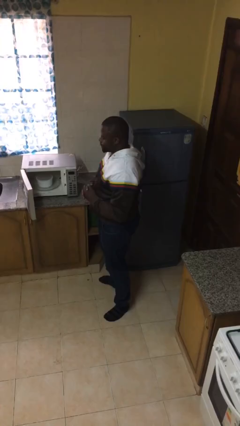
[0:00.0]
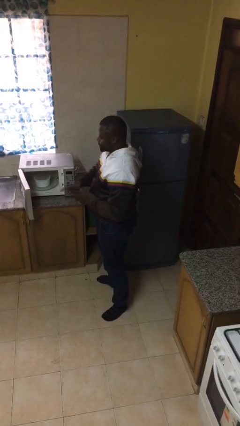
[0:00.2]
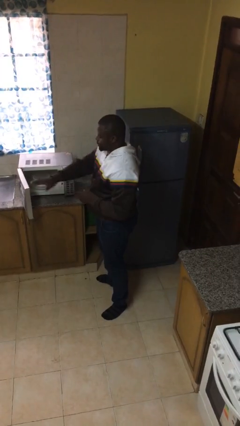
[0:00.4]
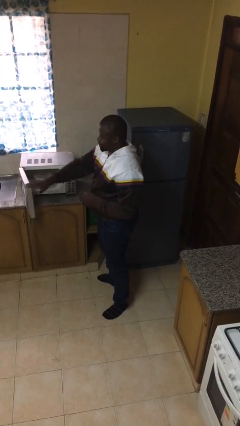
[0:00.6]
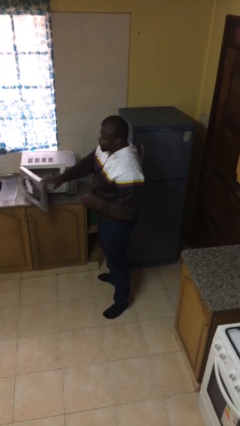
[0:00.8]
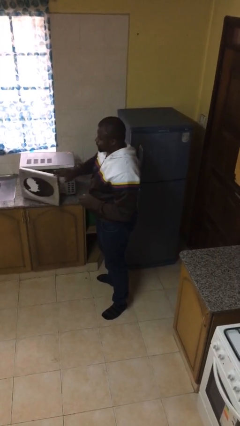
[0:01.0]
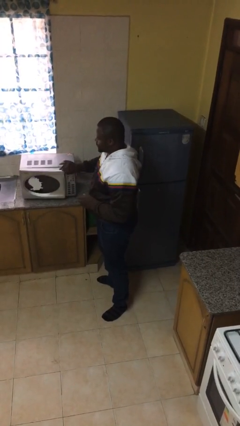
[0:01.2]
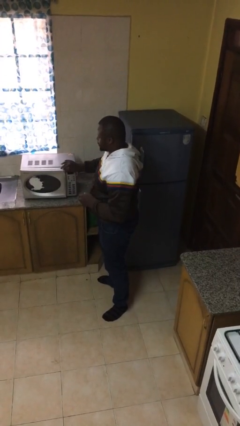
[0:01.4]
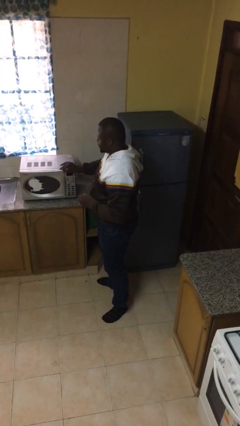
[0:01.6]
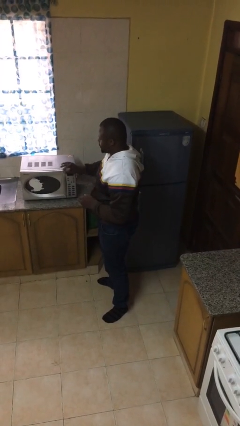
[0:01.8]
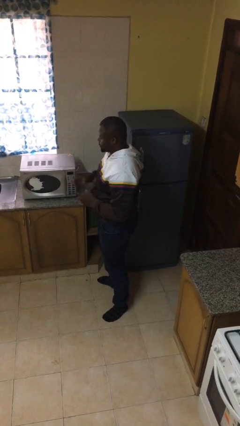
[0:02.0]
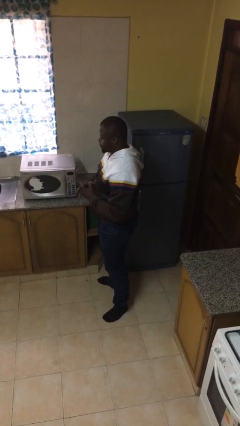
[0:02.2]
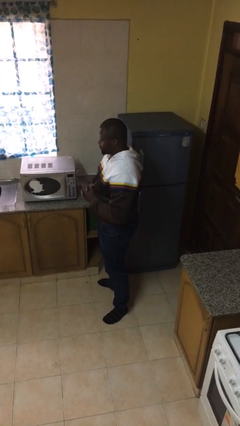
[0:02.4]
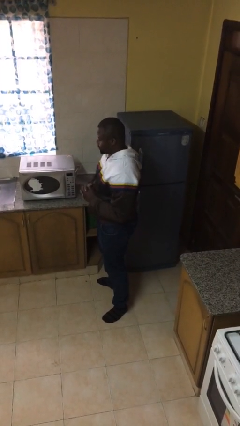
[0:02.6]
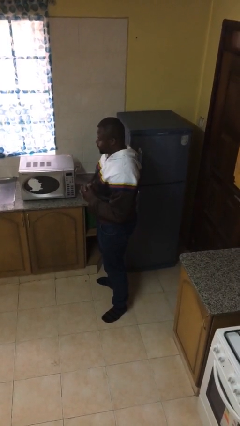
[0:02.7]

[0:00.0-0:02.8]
person closes microwave

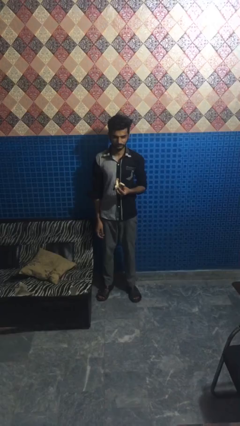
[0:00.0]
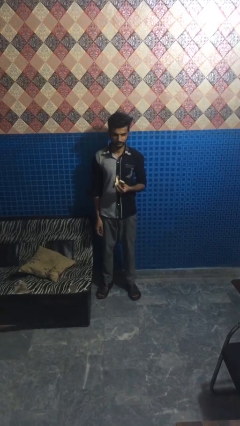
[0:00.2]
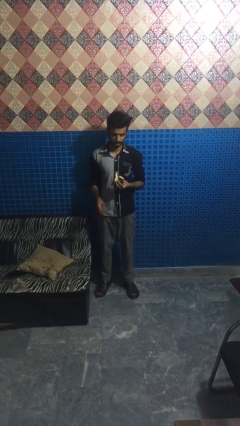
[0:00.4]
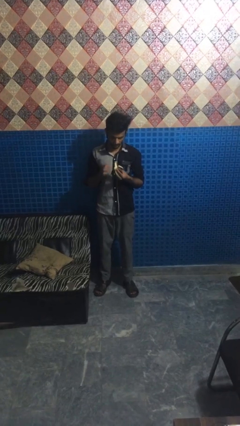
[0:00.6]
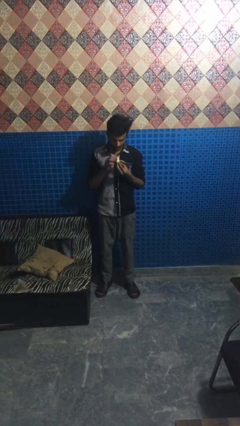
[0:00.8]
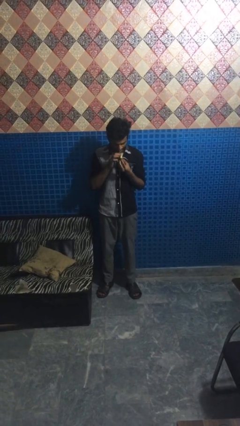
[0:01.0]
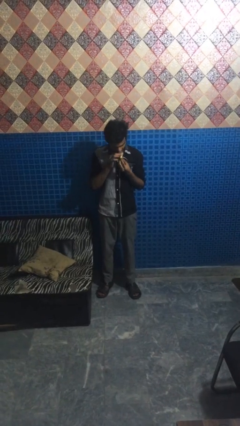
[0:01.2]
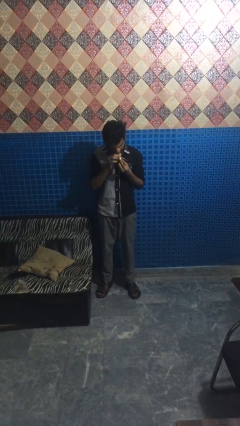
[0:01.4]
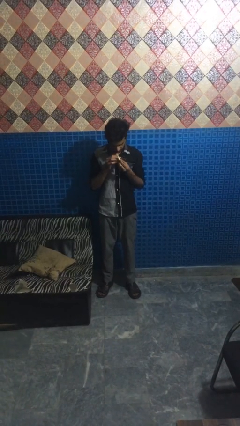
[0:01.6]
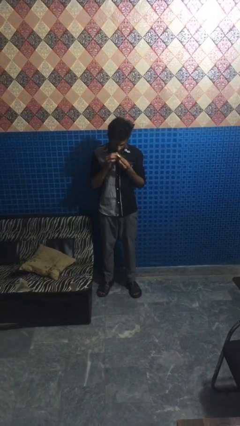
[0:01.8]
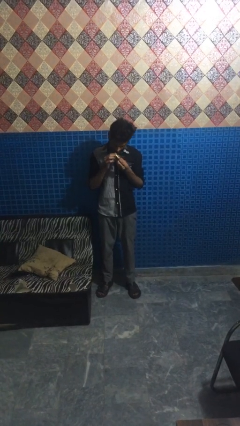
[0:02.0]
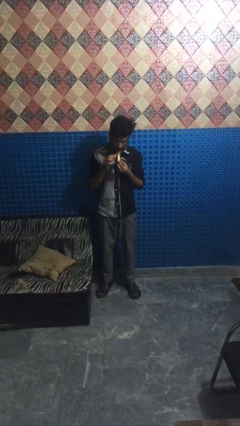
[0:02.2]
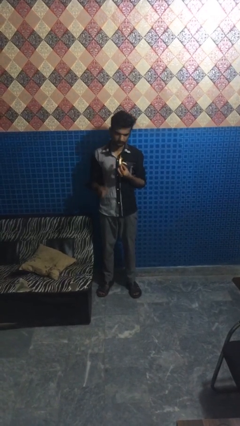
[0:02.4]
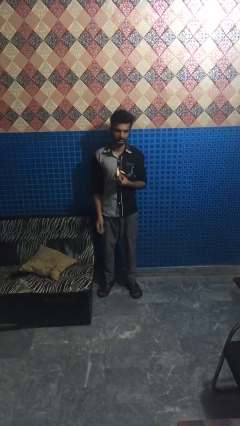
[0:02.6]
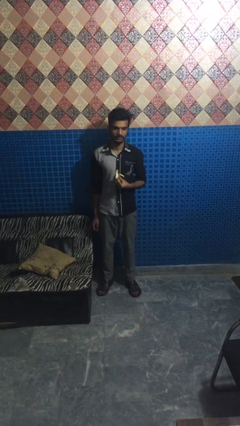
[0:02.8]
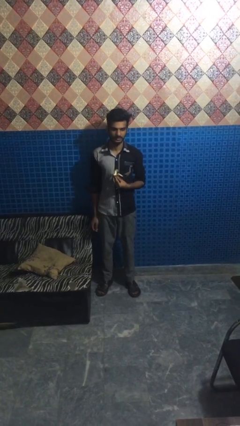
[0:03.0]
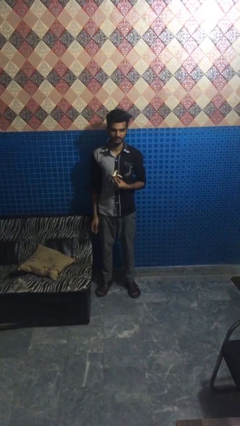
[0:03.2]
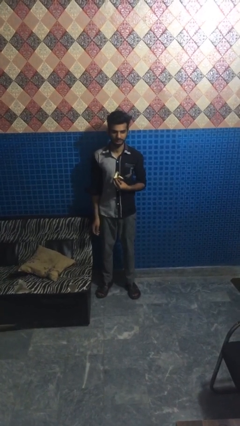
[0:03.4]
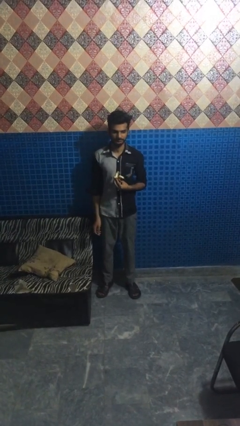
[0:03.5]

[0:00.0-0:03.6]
person eats banana

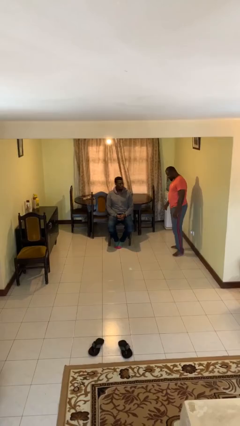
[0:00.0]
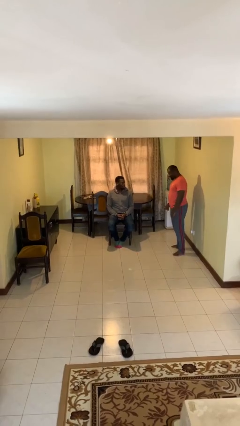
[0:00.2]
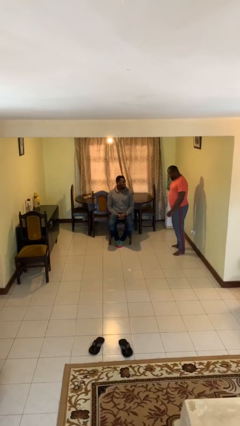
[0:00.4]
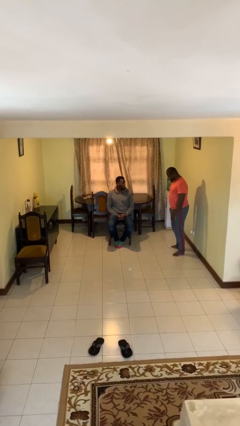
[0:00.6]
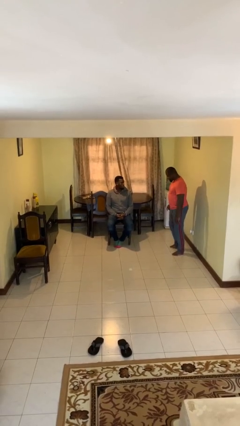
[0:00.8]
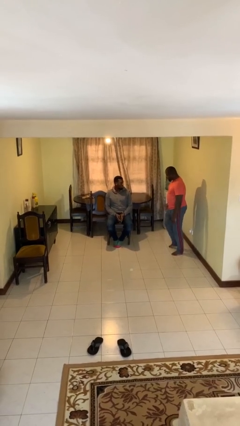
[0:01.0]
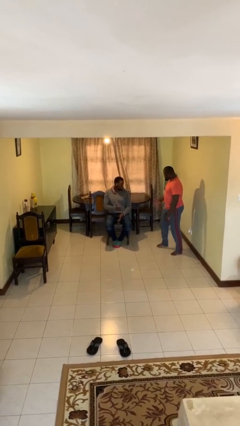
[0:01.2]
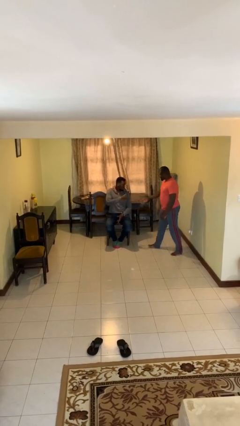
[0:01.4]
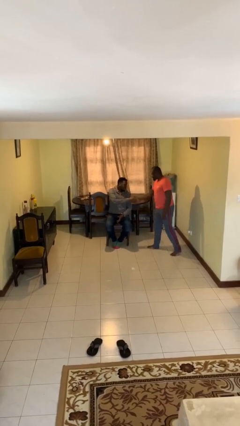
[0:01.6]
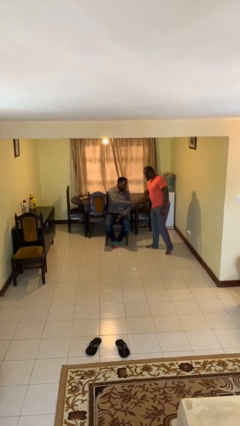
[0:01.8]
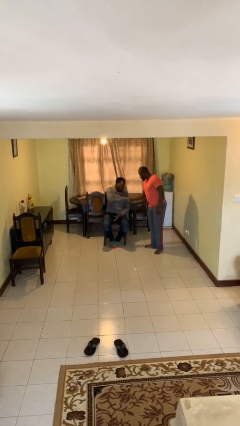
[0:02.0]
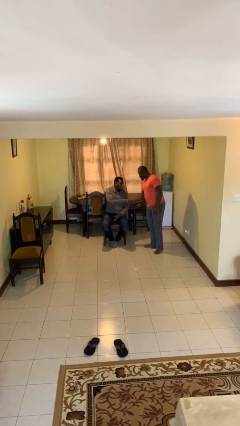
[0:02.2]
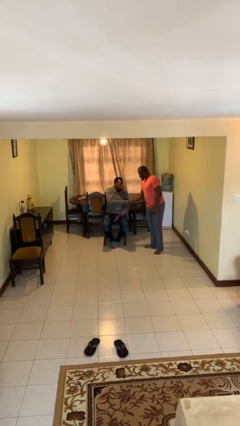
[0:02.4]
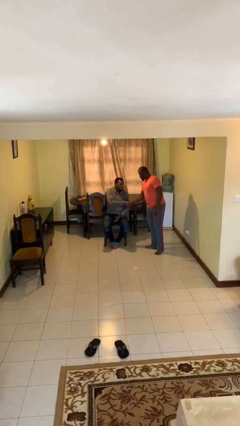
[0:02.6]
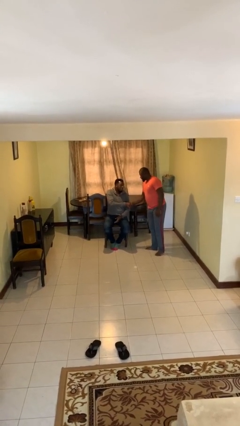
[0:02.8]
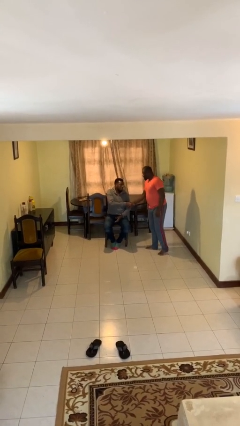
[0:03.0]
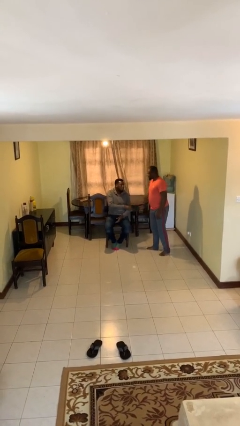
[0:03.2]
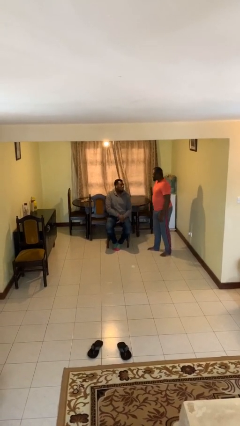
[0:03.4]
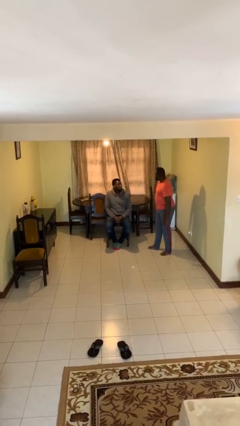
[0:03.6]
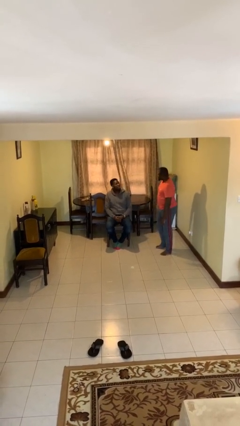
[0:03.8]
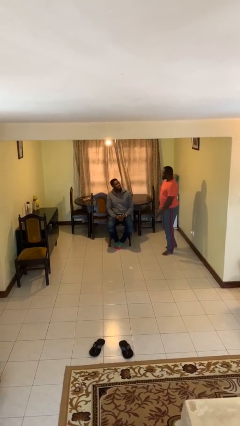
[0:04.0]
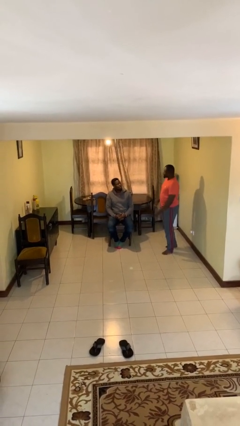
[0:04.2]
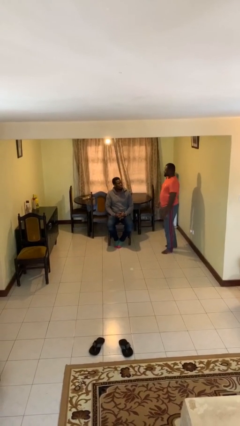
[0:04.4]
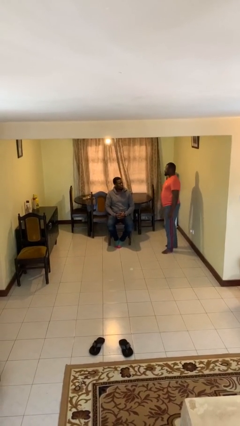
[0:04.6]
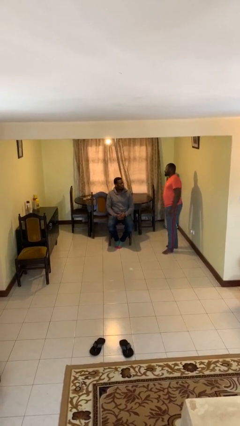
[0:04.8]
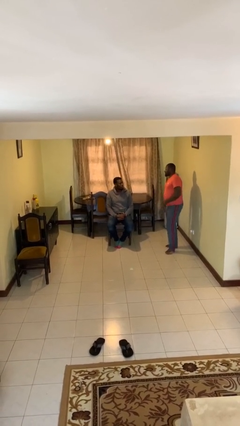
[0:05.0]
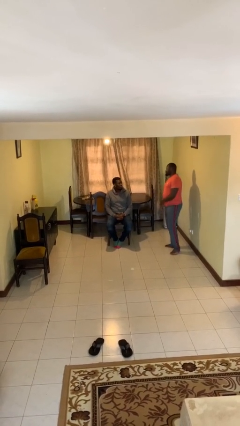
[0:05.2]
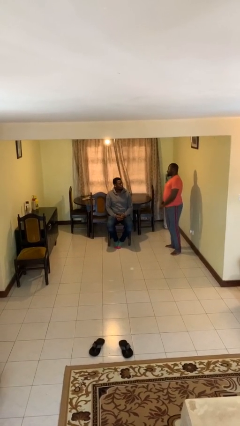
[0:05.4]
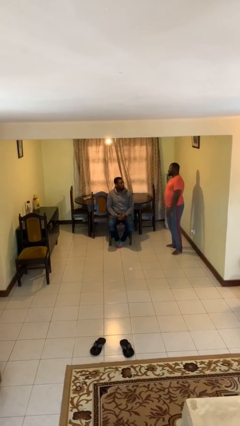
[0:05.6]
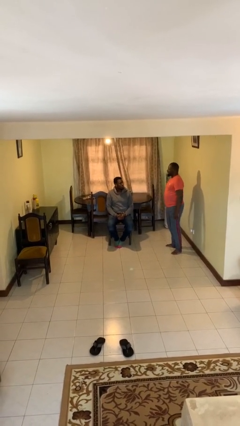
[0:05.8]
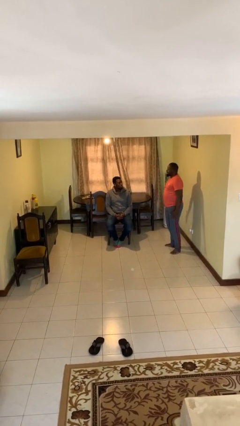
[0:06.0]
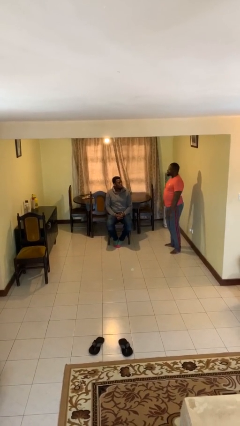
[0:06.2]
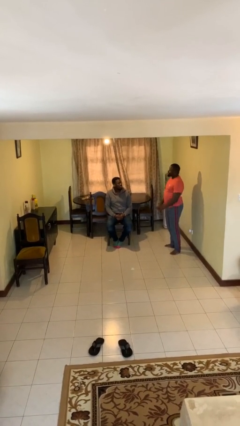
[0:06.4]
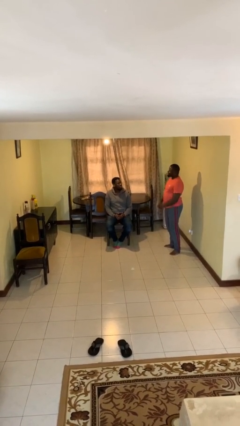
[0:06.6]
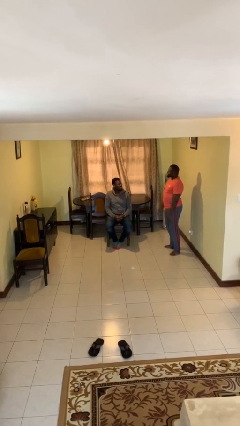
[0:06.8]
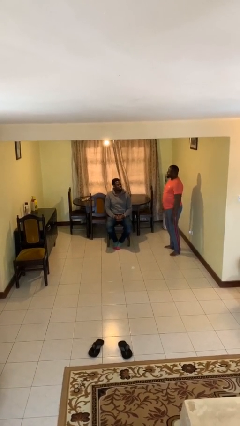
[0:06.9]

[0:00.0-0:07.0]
person shakes hand

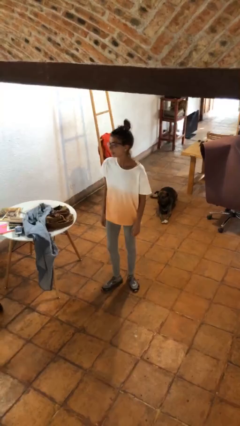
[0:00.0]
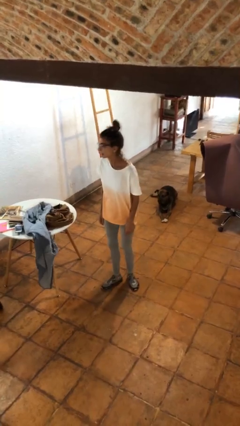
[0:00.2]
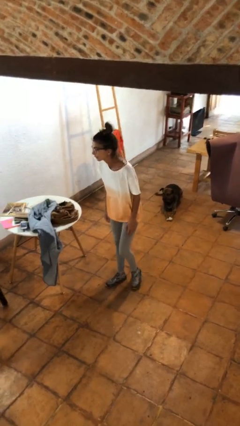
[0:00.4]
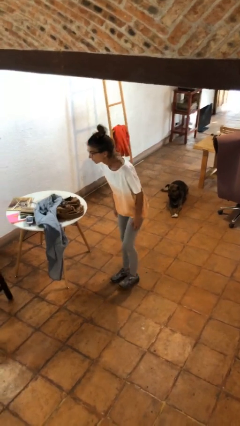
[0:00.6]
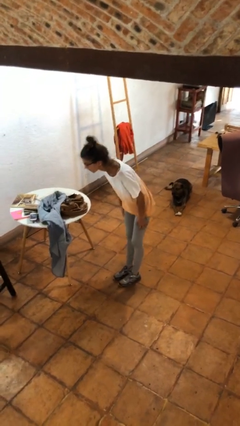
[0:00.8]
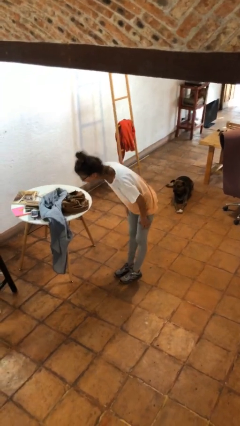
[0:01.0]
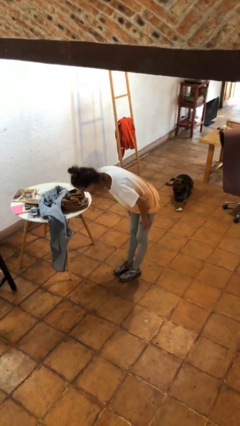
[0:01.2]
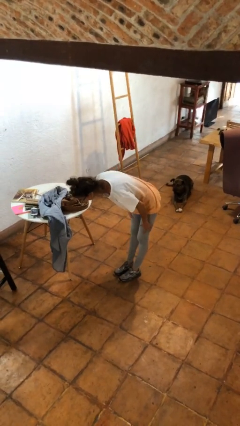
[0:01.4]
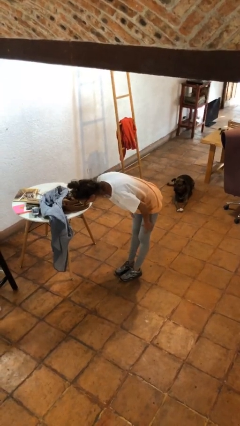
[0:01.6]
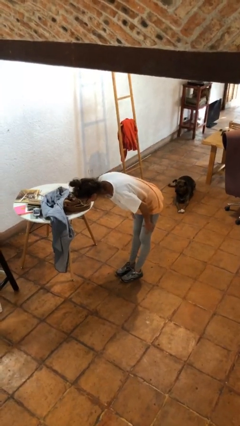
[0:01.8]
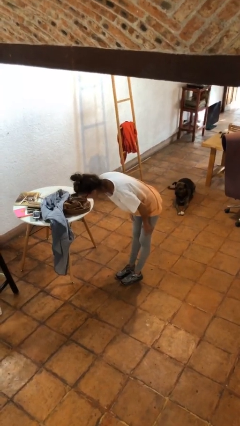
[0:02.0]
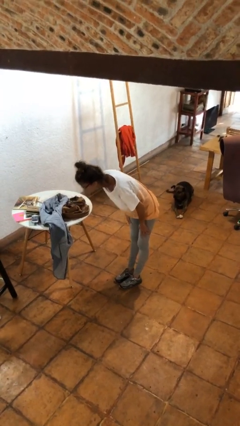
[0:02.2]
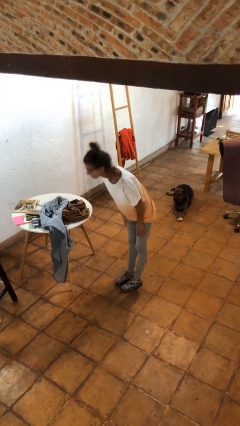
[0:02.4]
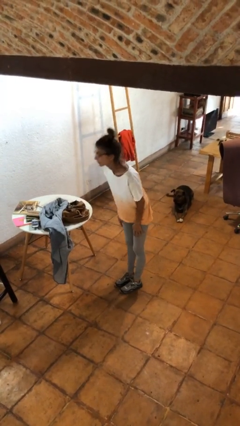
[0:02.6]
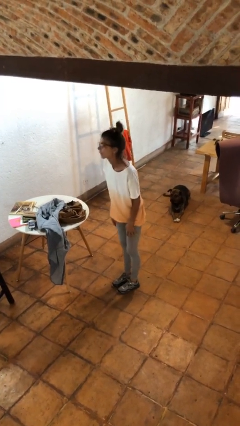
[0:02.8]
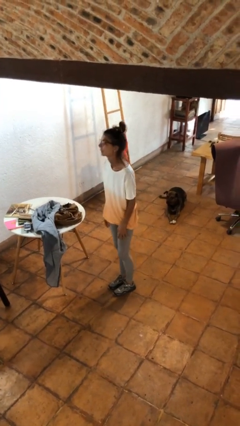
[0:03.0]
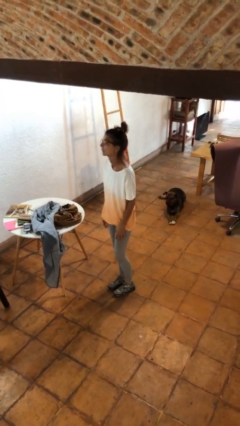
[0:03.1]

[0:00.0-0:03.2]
person bows

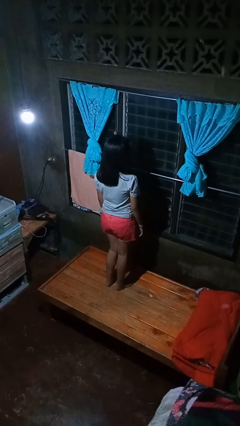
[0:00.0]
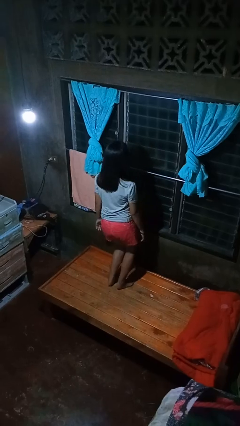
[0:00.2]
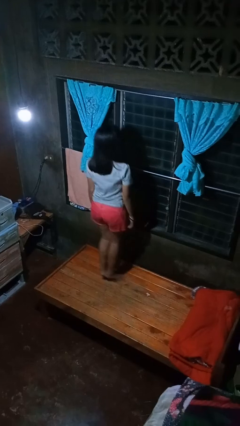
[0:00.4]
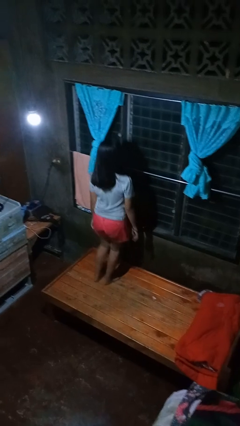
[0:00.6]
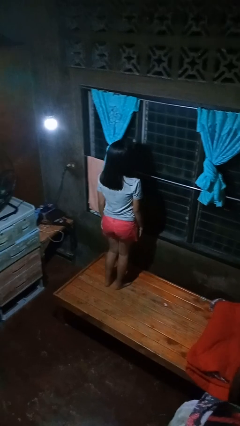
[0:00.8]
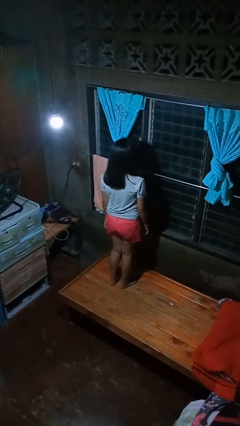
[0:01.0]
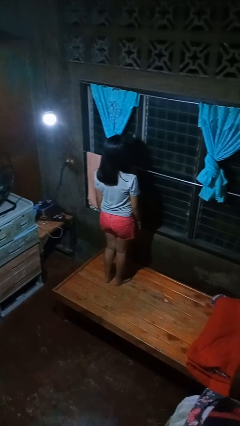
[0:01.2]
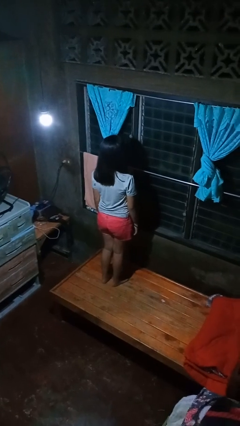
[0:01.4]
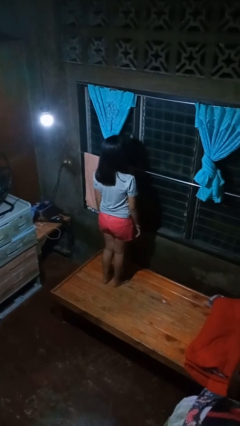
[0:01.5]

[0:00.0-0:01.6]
person jumps on bed
